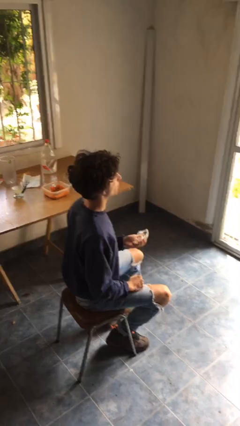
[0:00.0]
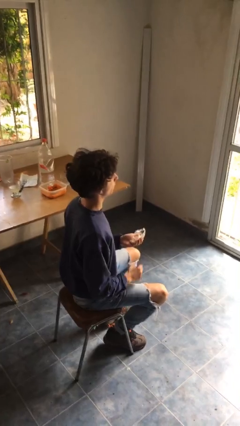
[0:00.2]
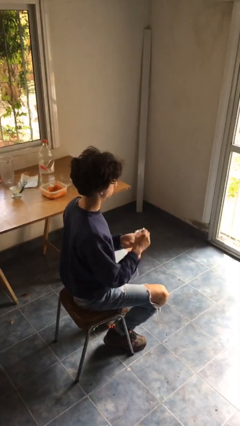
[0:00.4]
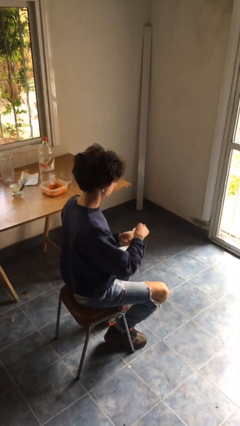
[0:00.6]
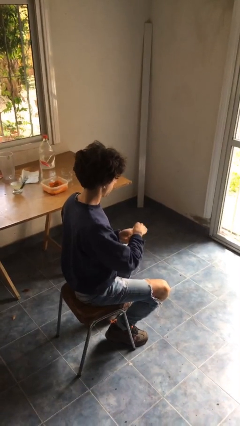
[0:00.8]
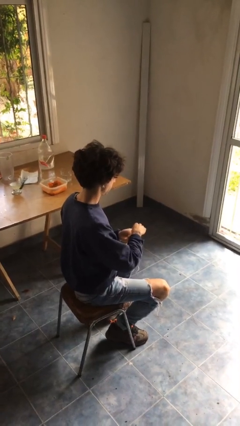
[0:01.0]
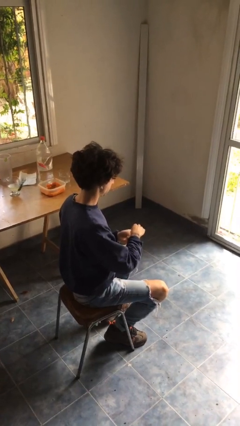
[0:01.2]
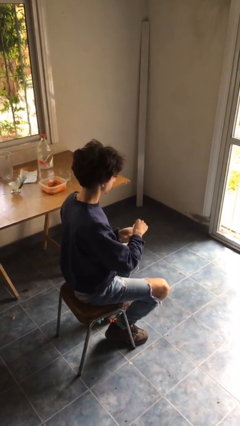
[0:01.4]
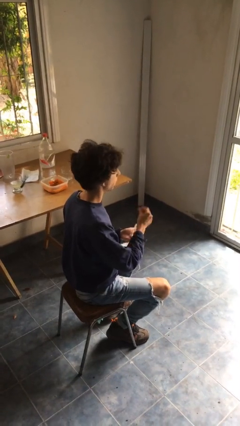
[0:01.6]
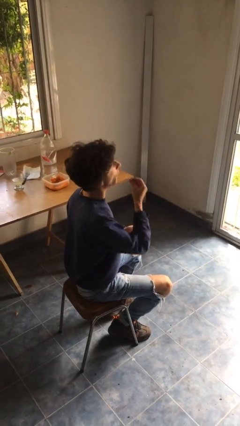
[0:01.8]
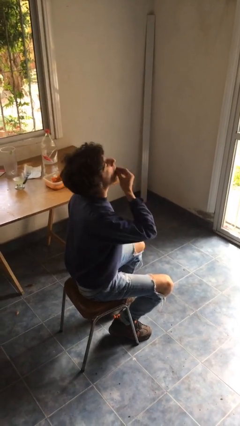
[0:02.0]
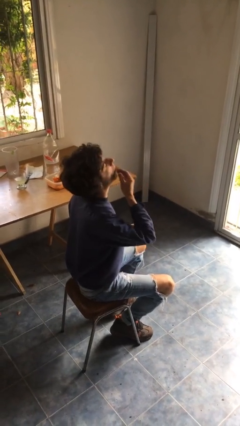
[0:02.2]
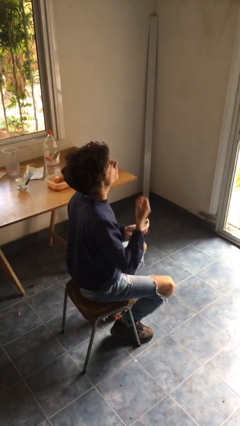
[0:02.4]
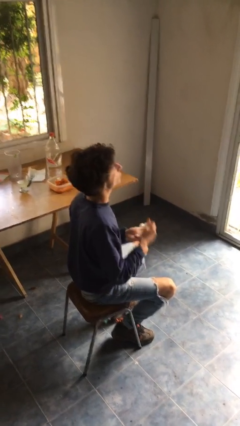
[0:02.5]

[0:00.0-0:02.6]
person eats snack from bag

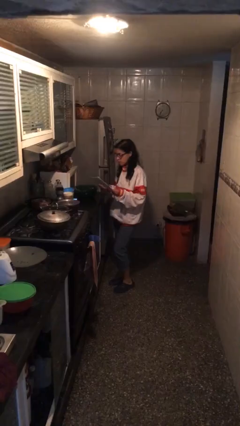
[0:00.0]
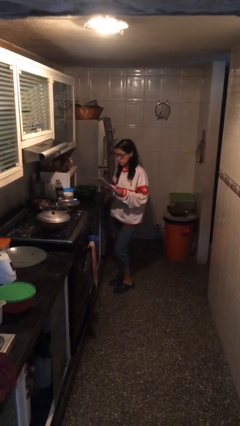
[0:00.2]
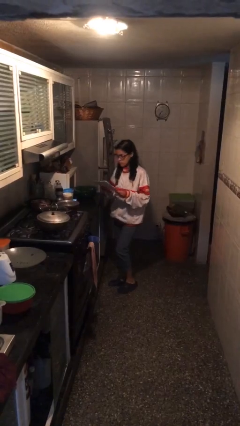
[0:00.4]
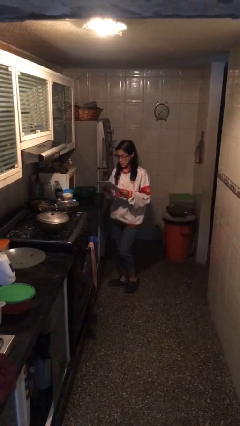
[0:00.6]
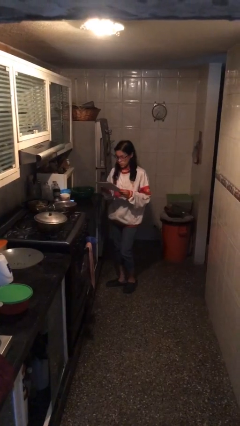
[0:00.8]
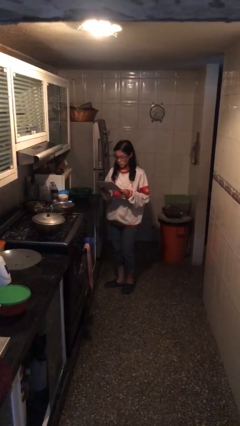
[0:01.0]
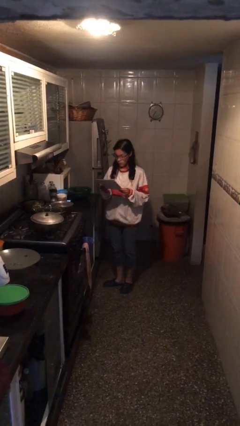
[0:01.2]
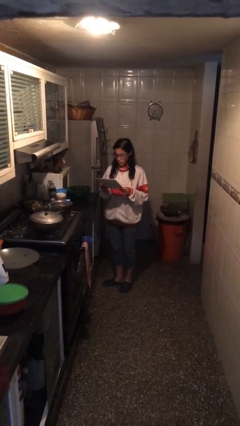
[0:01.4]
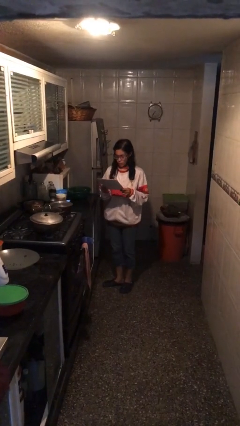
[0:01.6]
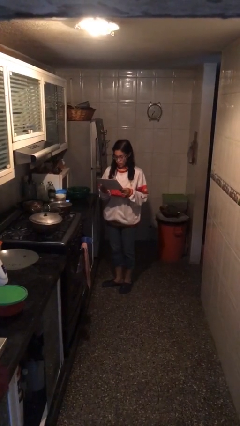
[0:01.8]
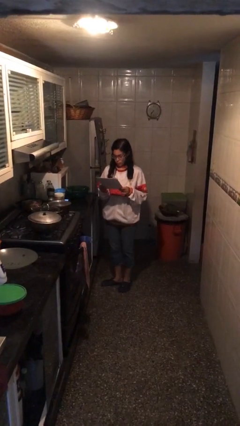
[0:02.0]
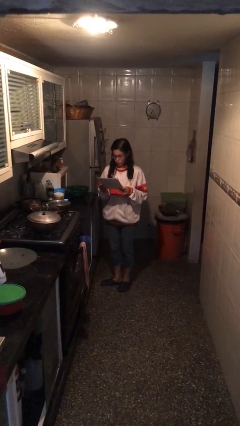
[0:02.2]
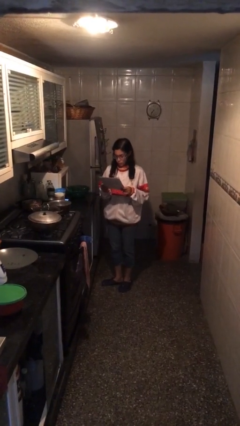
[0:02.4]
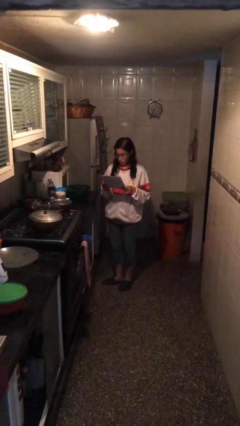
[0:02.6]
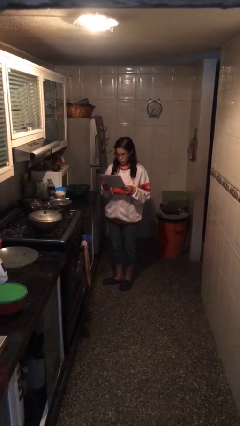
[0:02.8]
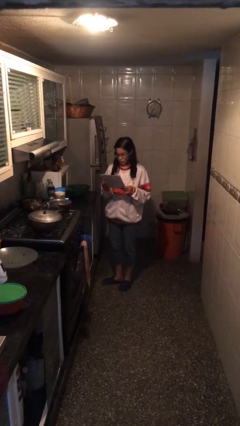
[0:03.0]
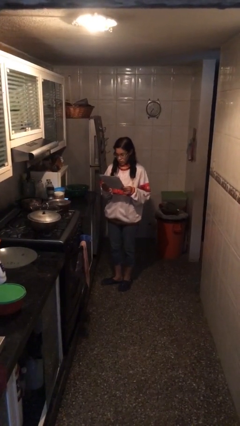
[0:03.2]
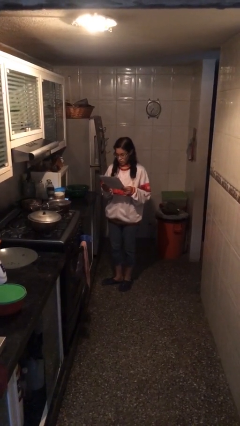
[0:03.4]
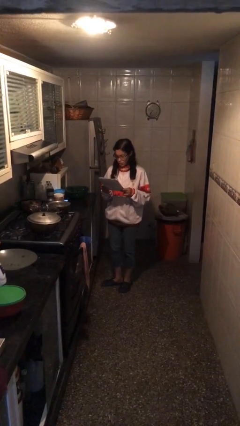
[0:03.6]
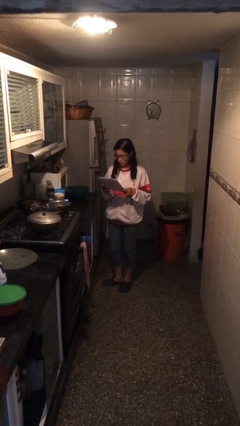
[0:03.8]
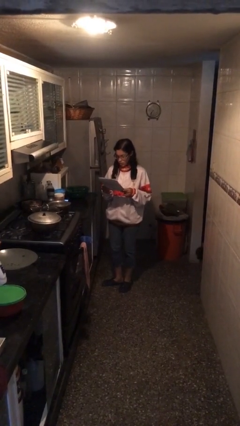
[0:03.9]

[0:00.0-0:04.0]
person reads document

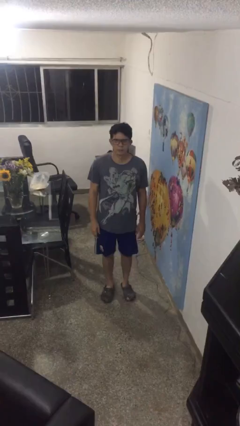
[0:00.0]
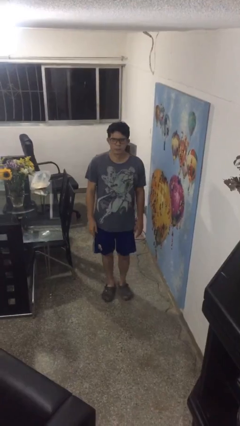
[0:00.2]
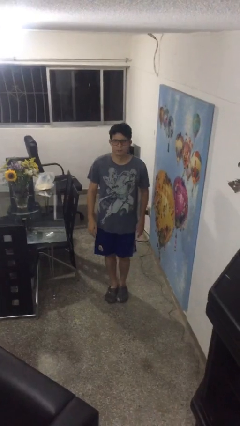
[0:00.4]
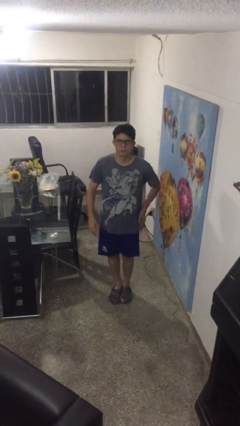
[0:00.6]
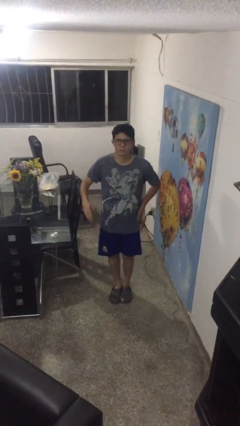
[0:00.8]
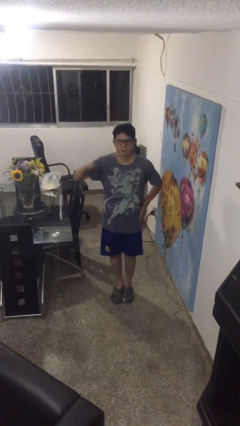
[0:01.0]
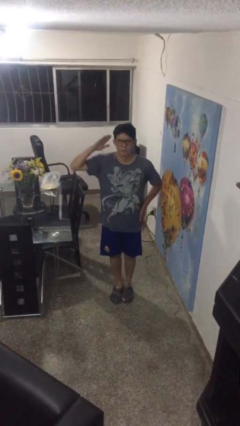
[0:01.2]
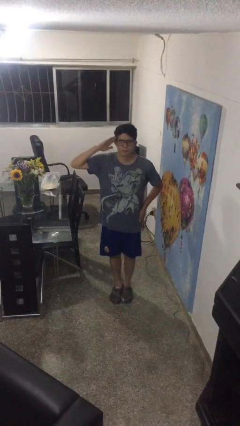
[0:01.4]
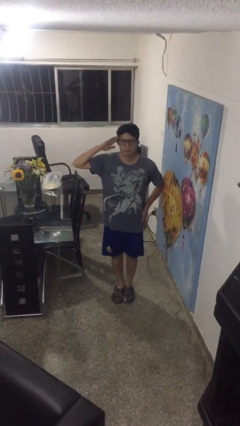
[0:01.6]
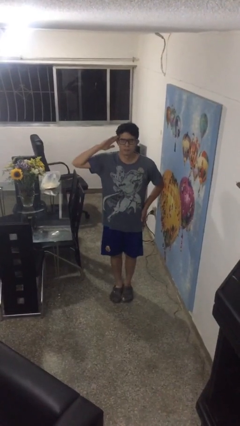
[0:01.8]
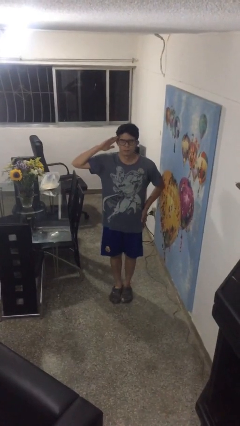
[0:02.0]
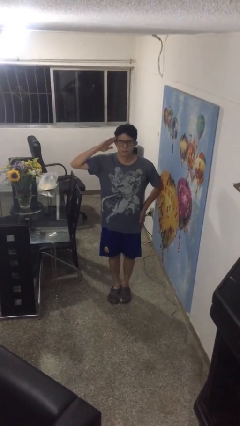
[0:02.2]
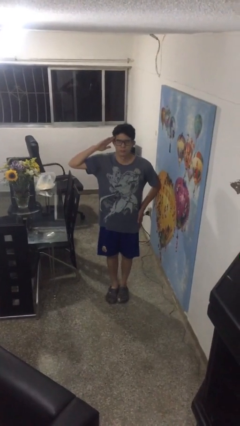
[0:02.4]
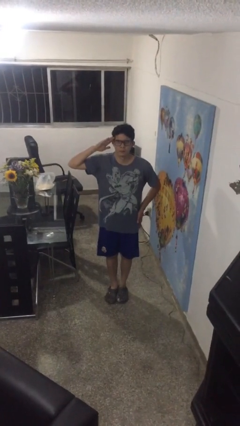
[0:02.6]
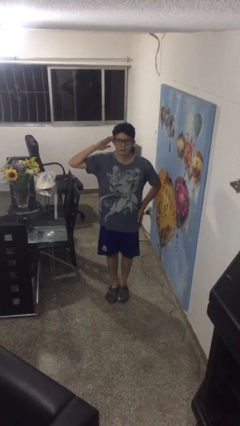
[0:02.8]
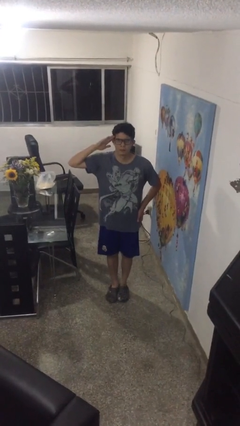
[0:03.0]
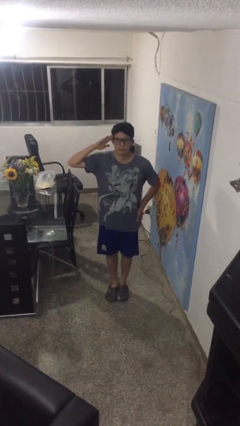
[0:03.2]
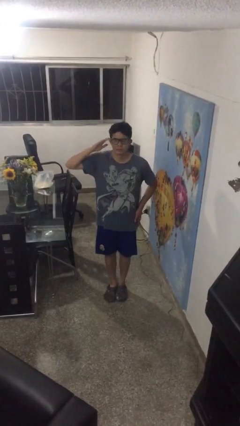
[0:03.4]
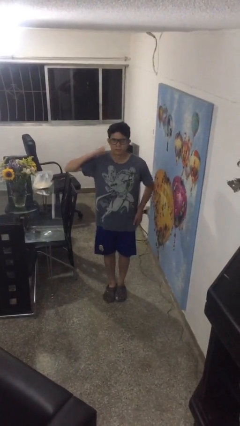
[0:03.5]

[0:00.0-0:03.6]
person salutes

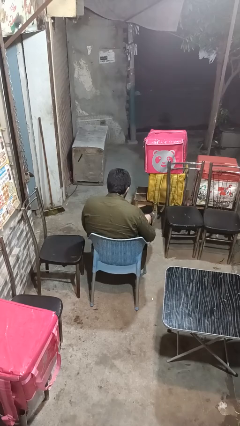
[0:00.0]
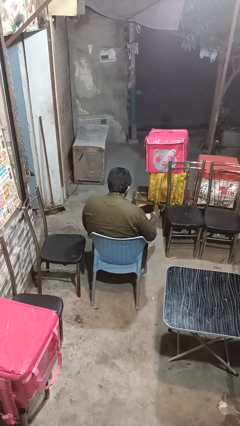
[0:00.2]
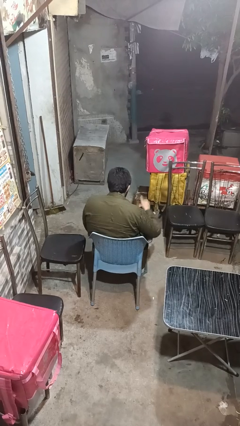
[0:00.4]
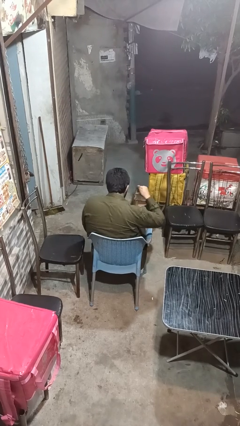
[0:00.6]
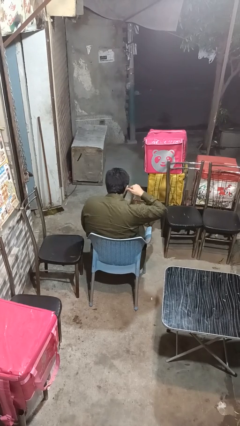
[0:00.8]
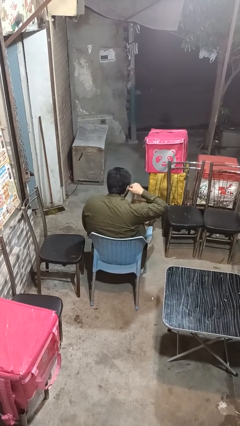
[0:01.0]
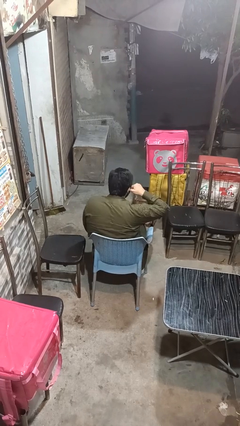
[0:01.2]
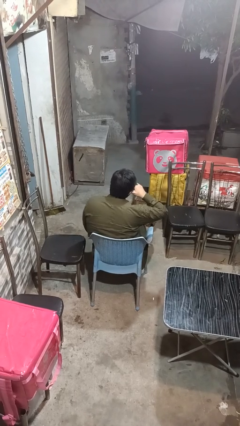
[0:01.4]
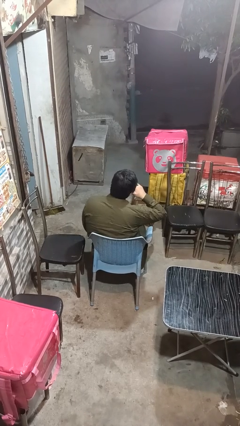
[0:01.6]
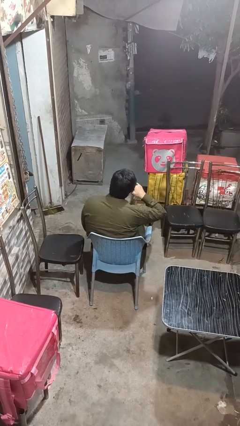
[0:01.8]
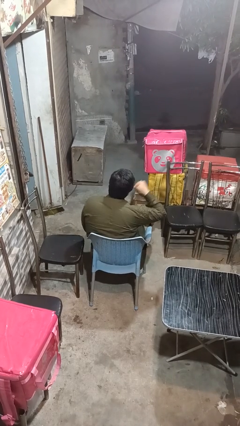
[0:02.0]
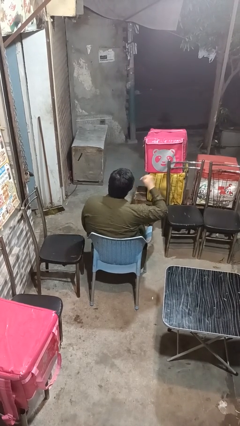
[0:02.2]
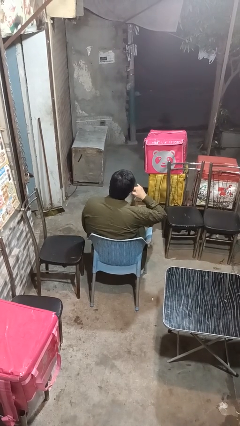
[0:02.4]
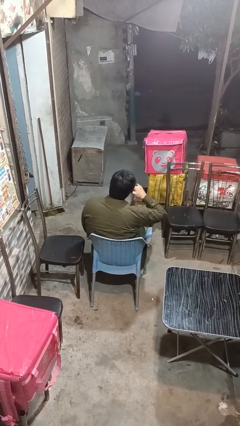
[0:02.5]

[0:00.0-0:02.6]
person gestures call me

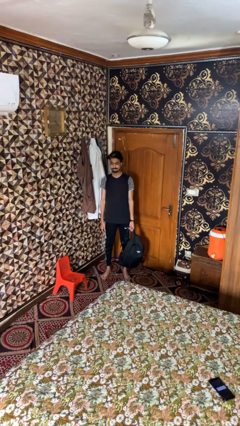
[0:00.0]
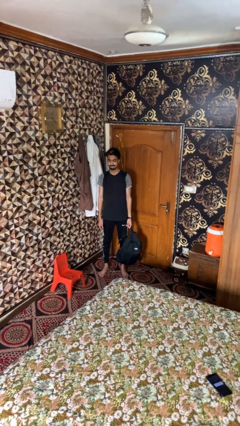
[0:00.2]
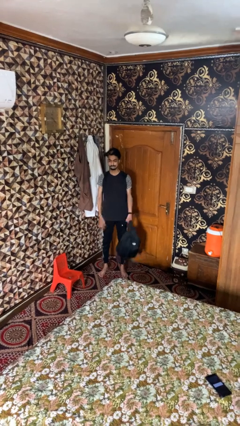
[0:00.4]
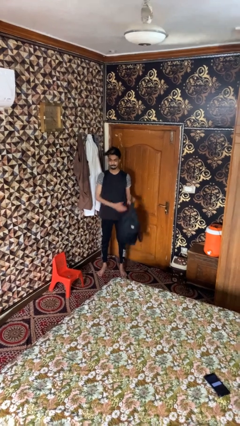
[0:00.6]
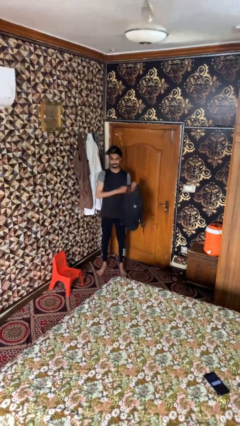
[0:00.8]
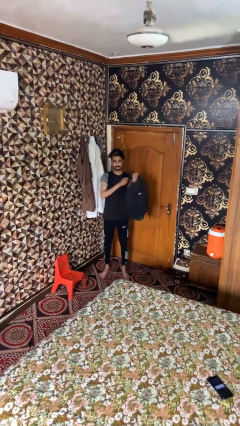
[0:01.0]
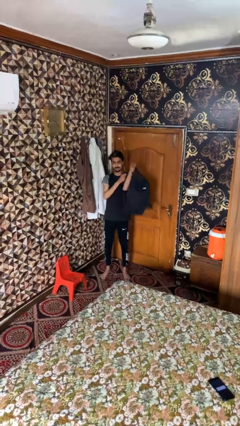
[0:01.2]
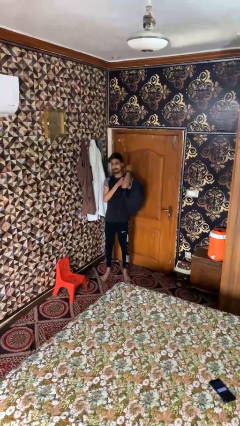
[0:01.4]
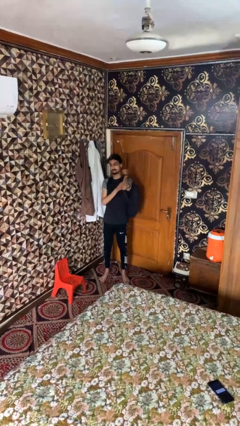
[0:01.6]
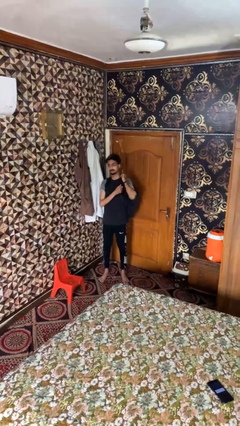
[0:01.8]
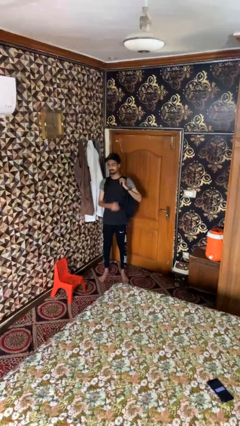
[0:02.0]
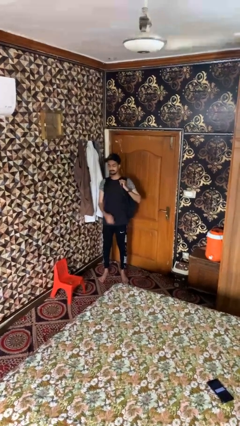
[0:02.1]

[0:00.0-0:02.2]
person puts on backpack

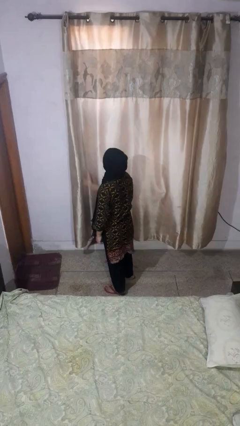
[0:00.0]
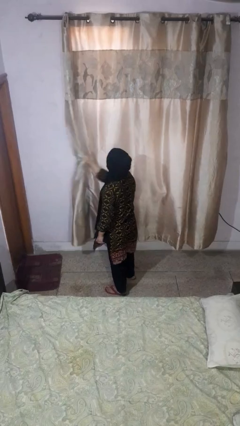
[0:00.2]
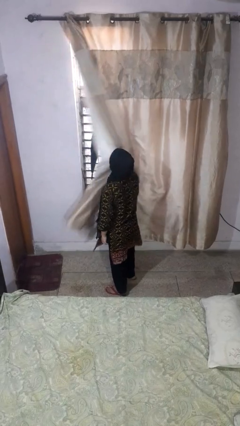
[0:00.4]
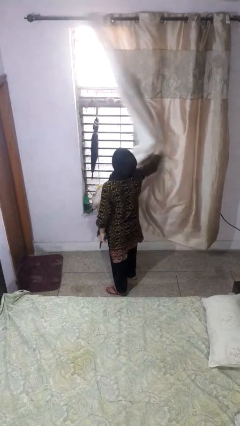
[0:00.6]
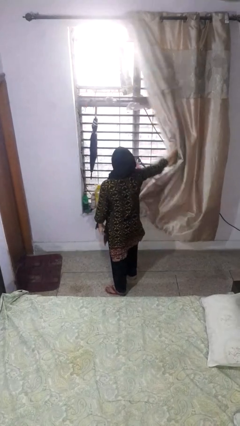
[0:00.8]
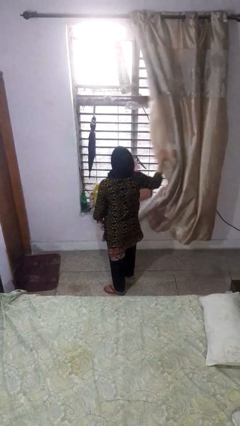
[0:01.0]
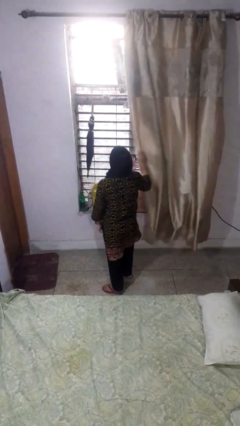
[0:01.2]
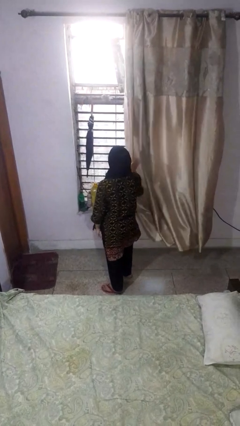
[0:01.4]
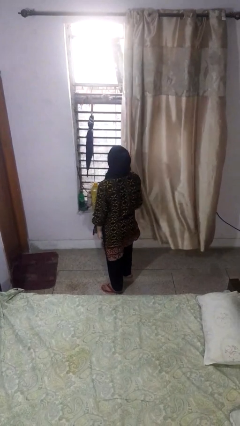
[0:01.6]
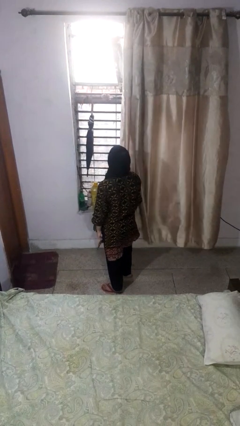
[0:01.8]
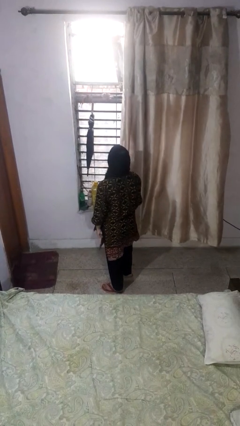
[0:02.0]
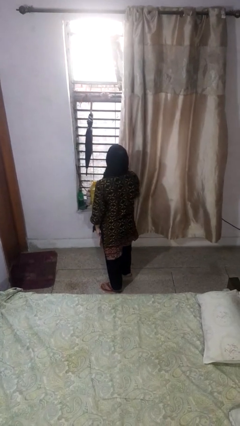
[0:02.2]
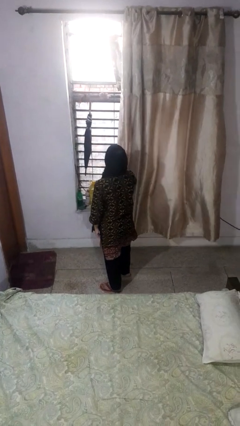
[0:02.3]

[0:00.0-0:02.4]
person opens curtains

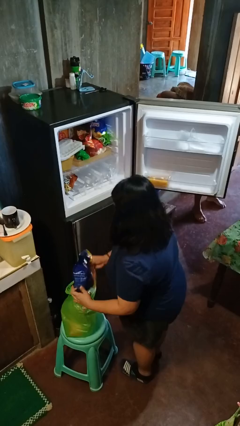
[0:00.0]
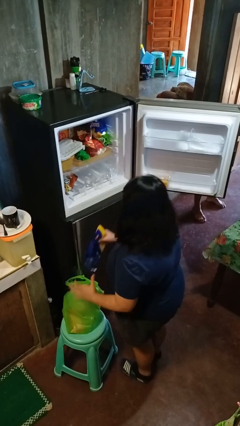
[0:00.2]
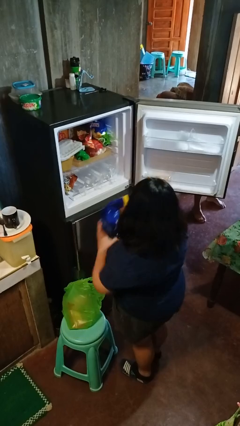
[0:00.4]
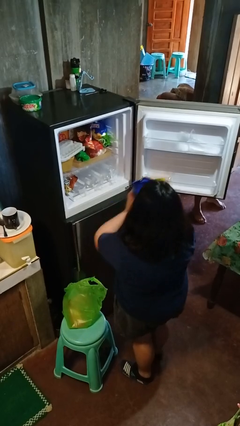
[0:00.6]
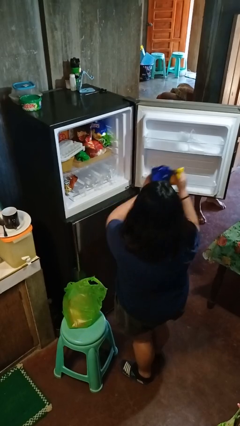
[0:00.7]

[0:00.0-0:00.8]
person loads groceries into refrigerator
